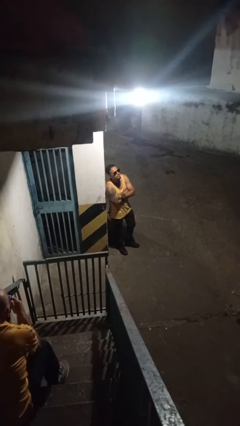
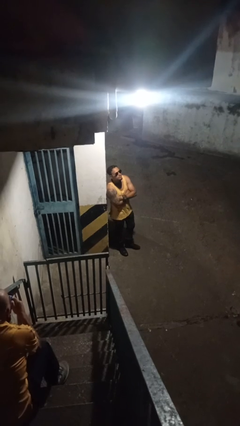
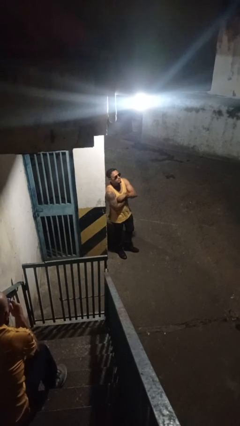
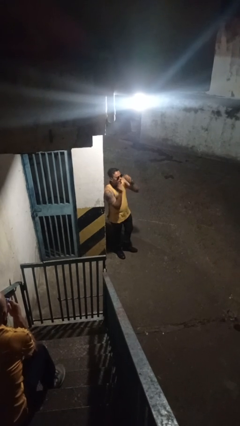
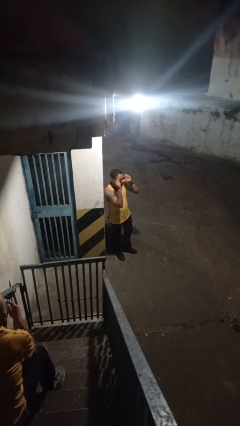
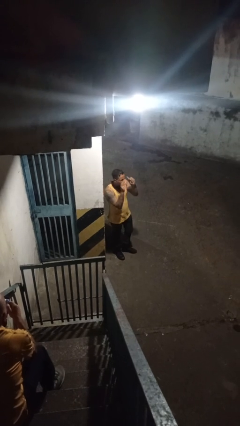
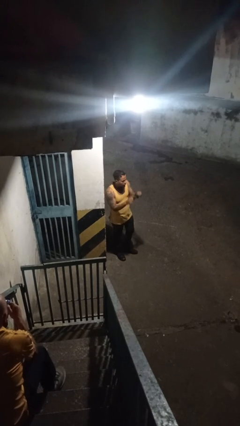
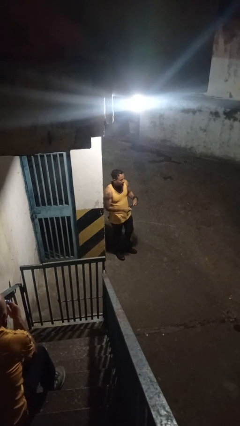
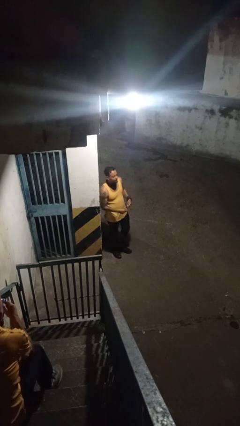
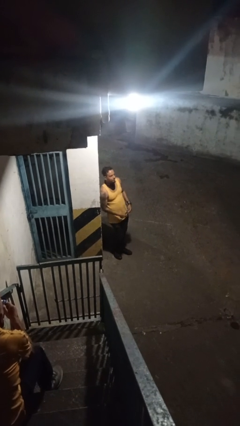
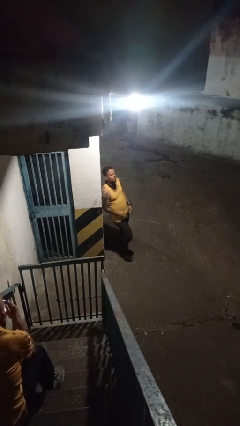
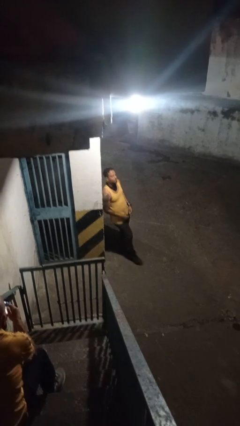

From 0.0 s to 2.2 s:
person takes off sunglasses

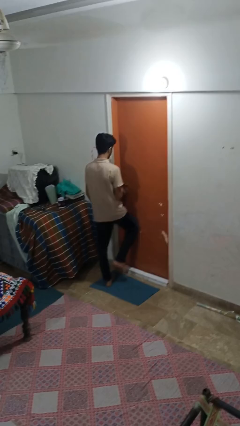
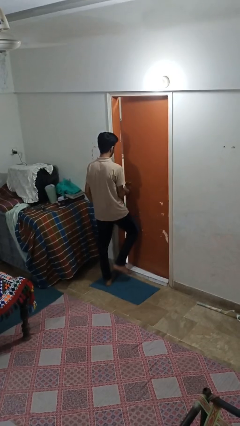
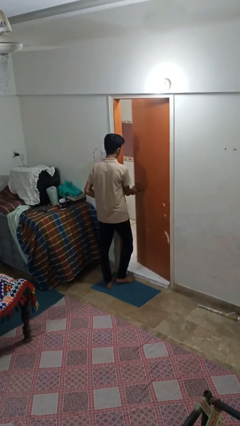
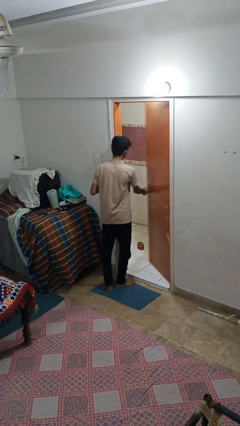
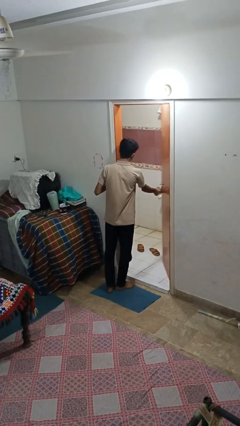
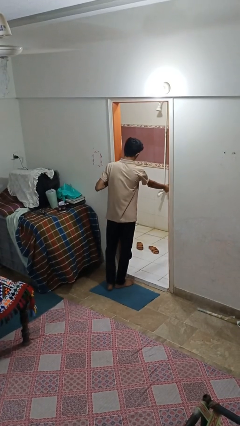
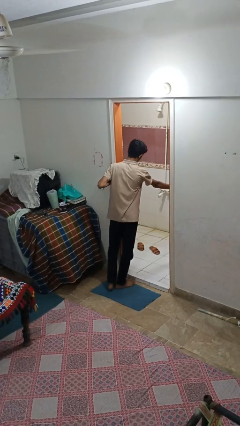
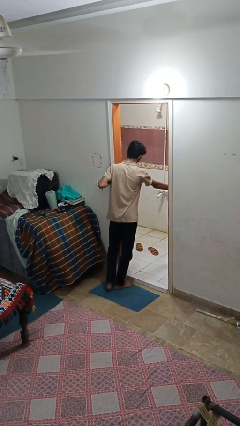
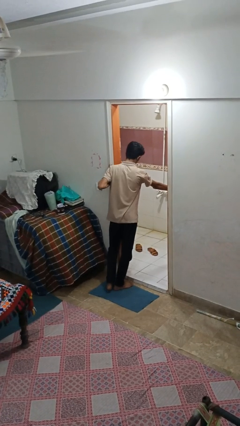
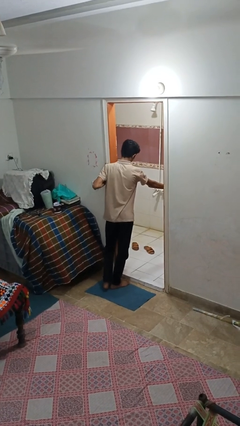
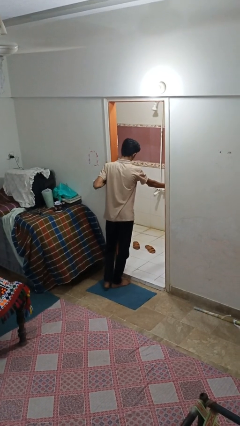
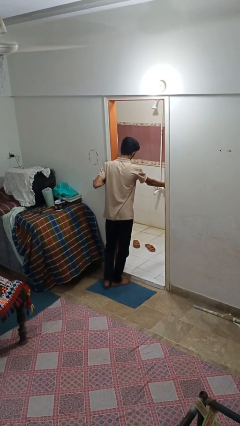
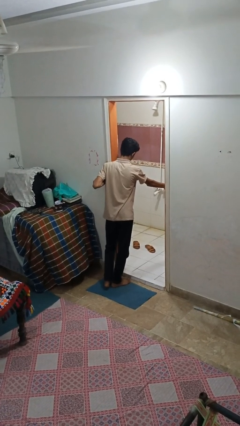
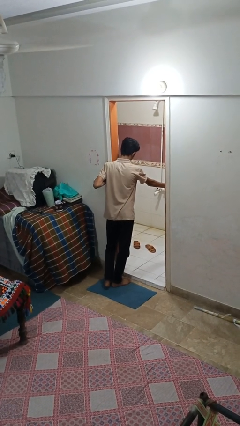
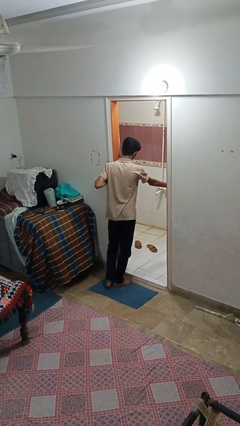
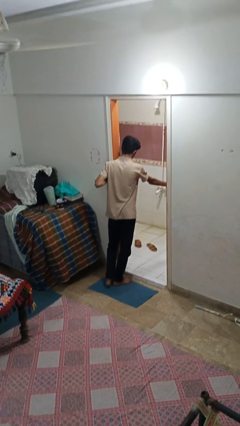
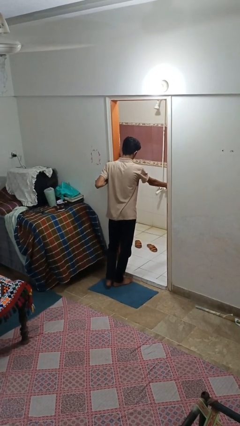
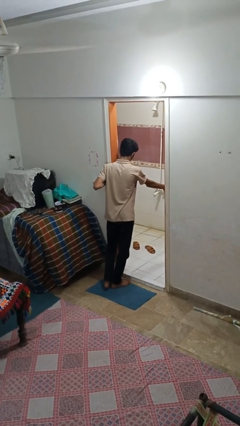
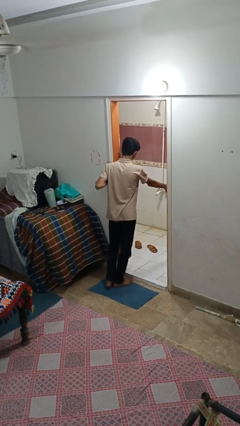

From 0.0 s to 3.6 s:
person opens facility door

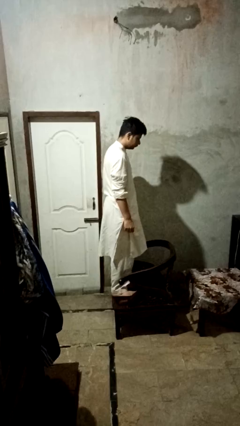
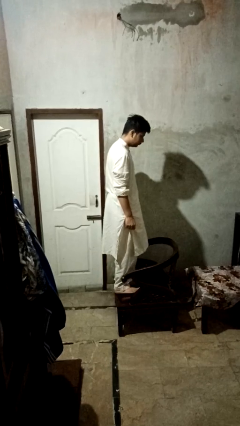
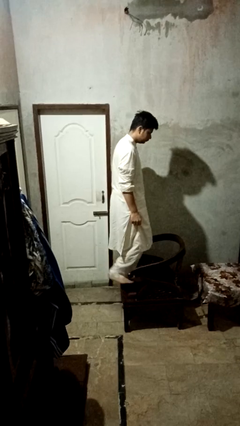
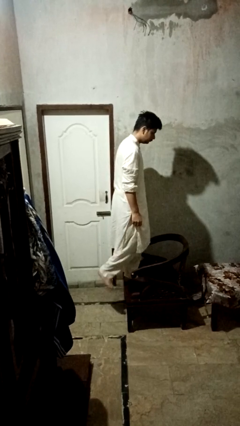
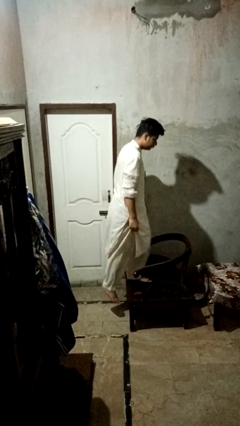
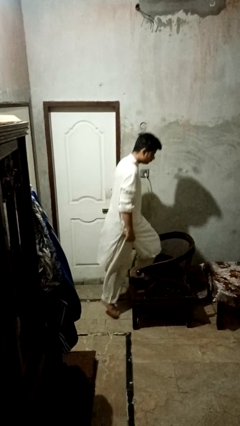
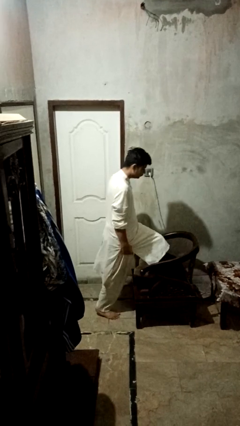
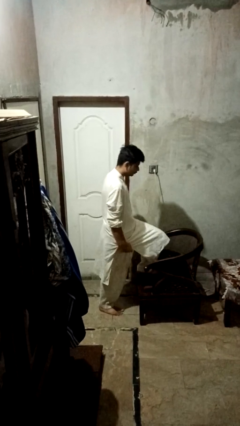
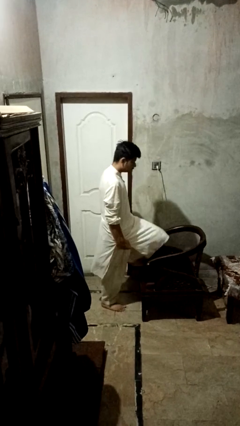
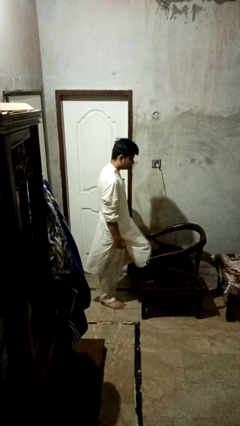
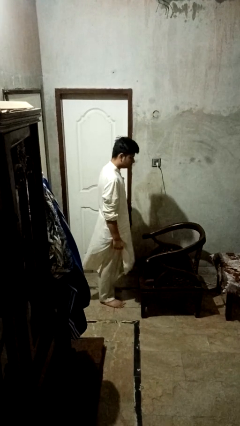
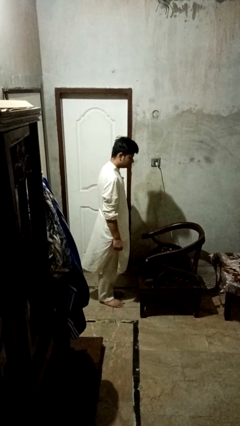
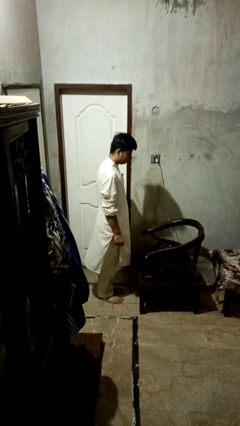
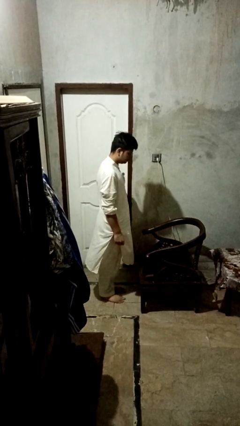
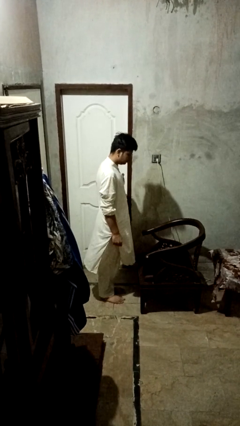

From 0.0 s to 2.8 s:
person climbs off couch

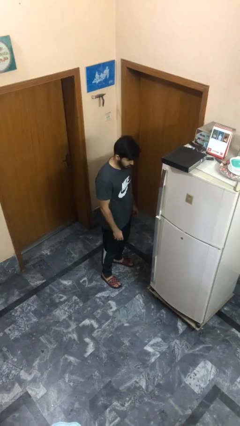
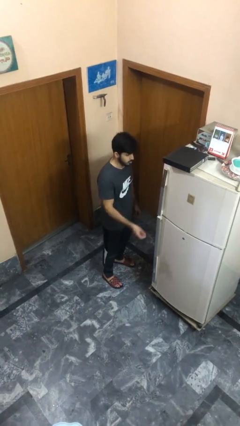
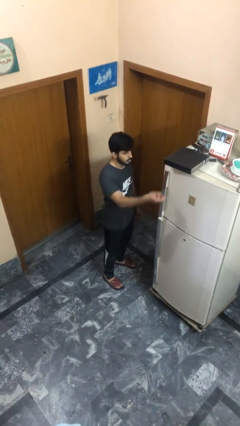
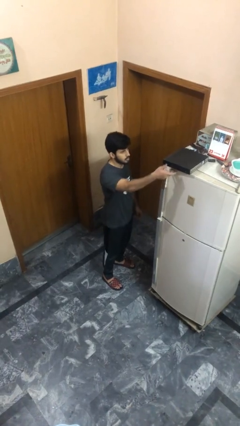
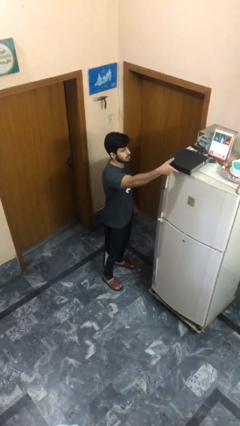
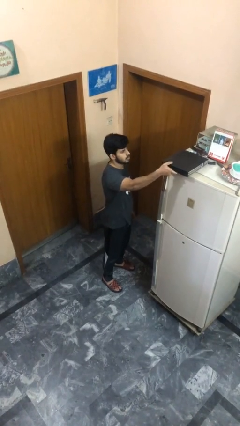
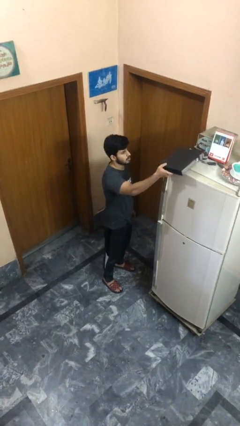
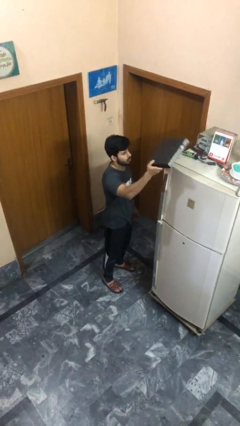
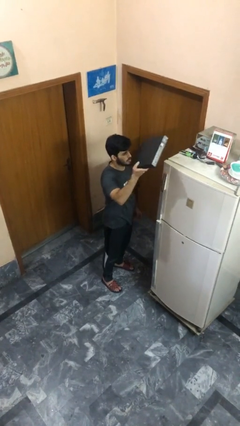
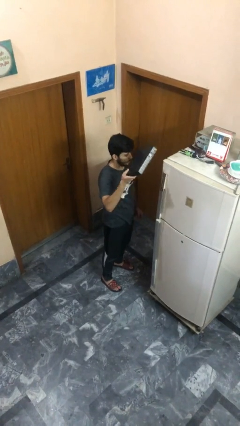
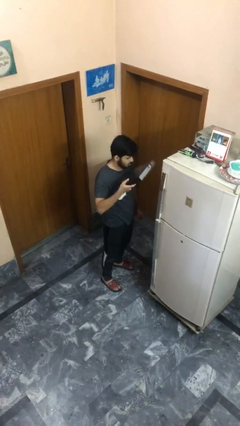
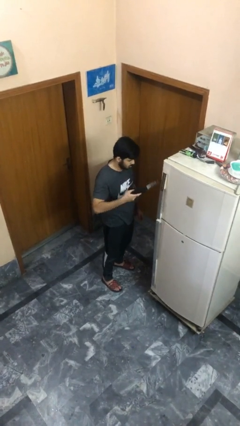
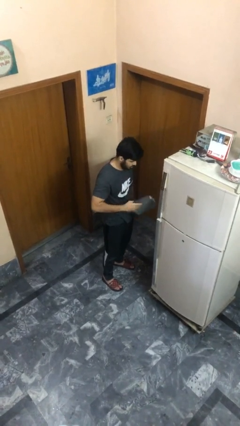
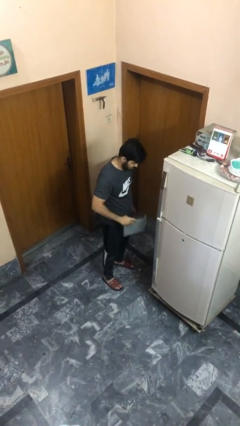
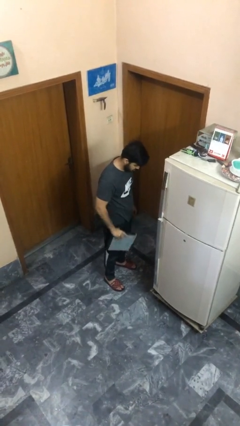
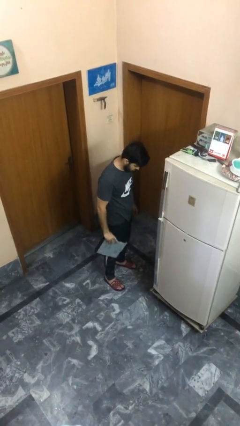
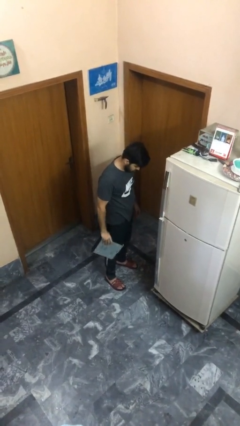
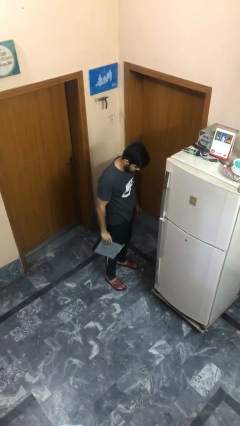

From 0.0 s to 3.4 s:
person picks up object from countertop

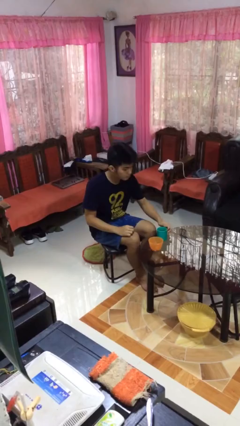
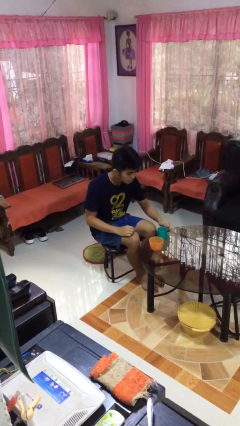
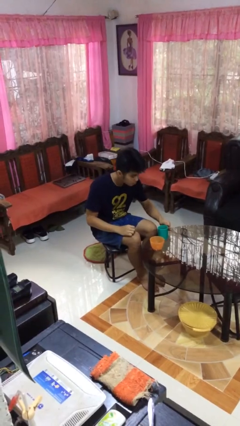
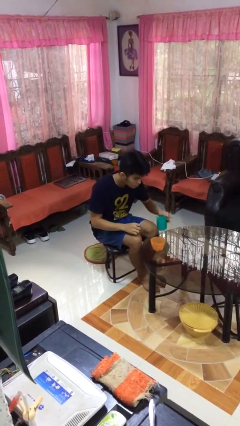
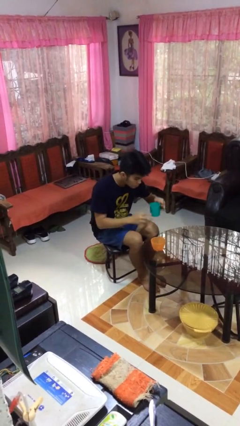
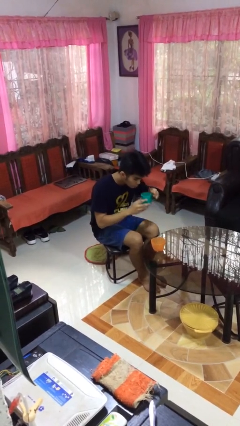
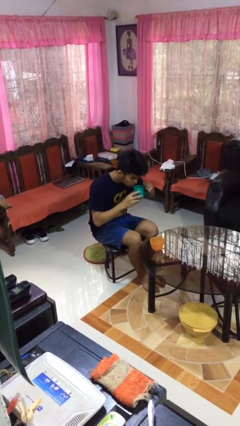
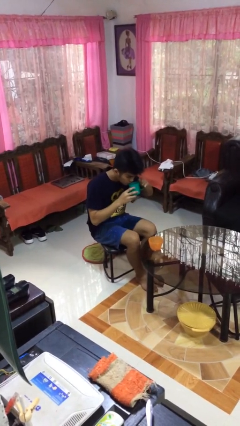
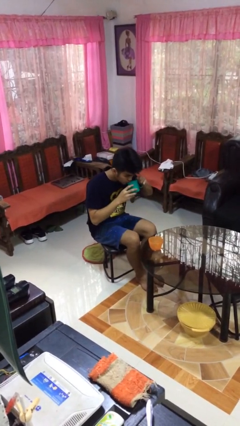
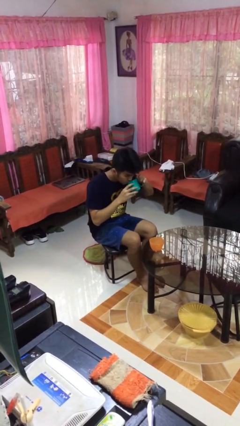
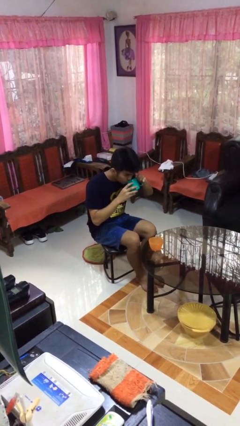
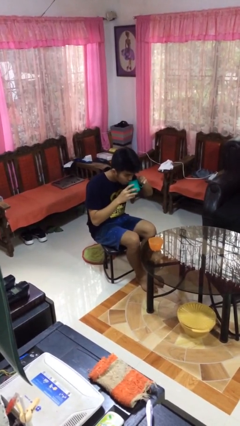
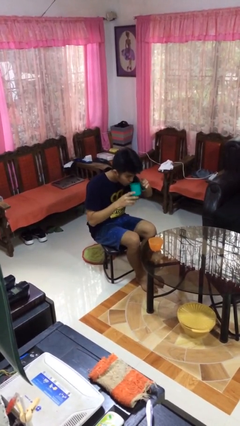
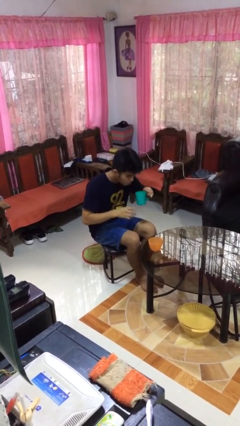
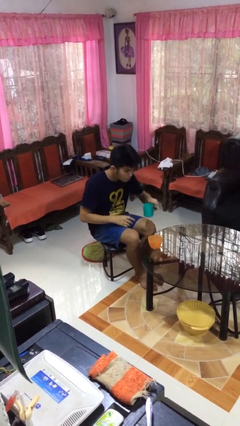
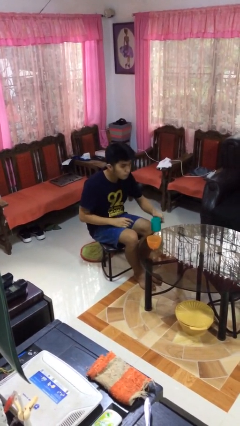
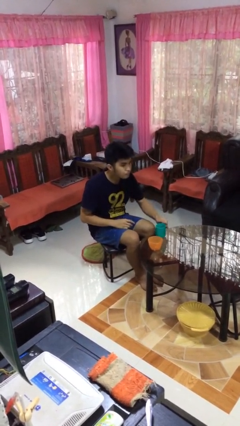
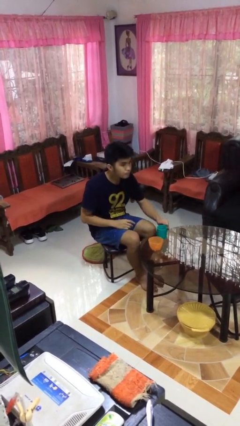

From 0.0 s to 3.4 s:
person drinks from cup

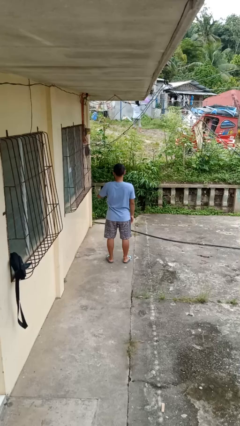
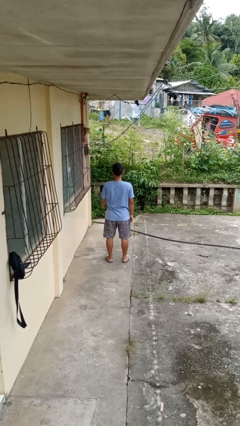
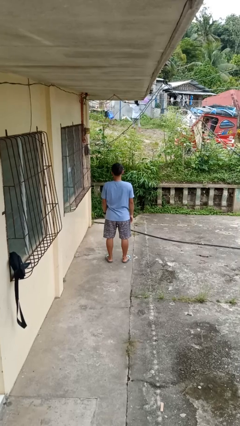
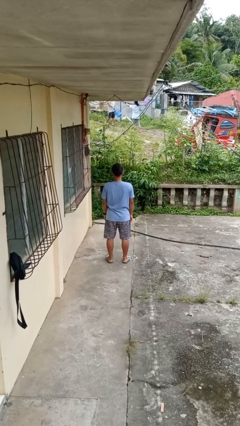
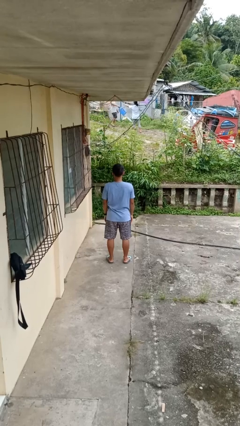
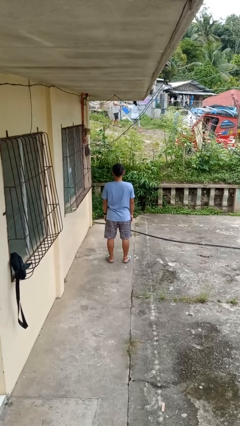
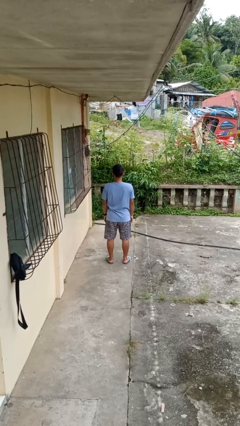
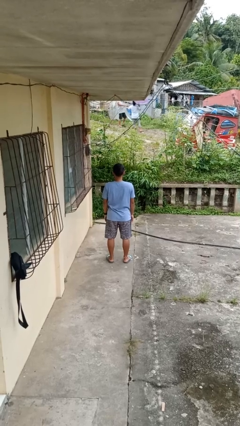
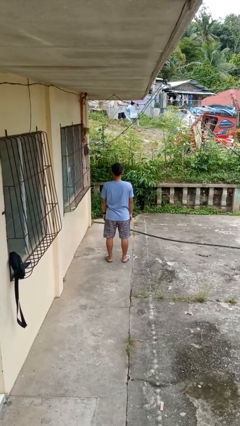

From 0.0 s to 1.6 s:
person gestures swipe down
